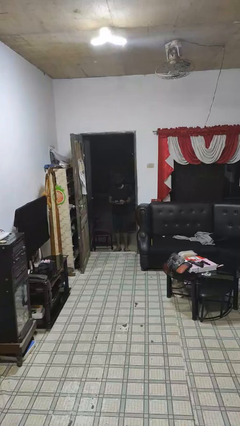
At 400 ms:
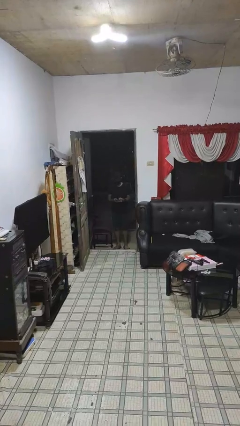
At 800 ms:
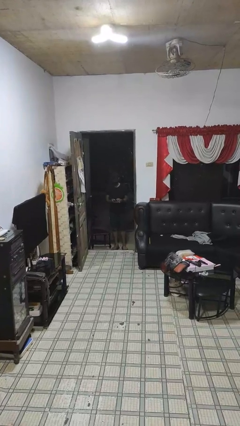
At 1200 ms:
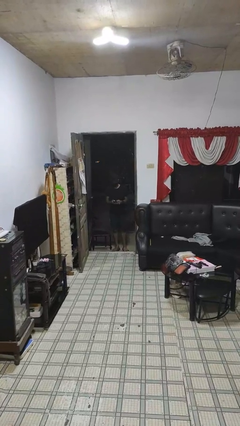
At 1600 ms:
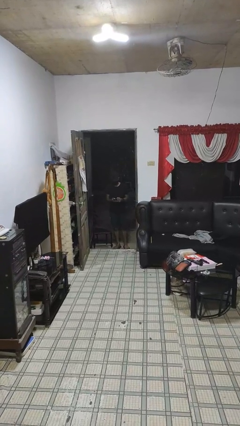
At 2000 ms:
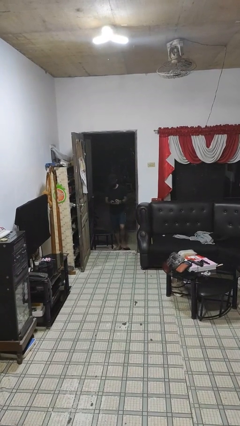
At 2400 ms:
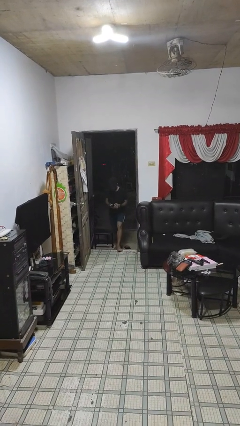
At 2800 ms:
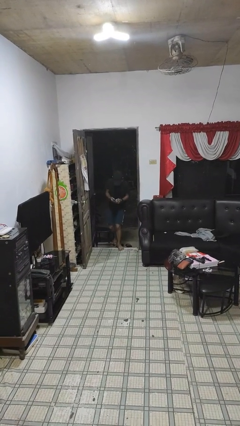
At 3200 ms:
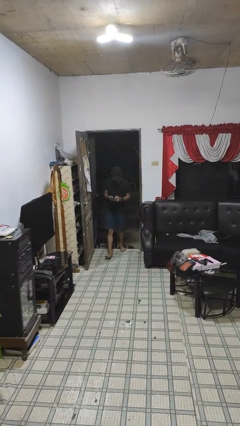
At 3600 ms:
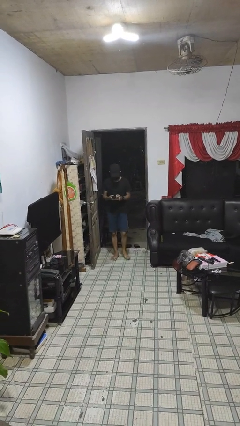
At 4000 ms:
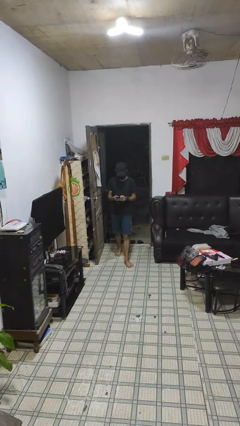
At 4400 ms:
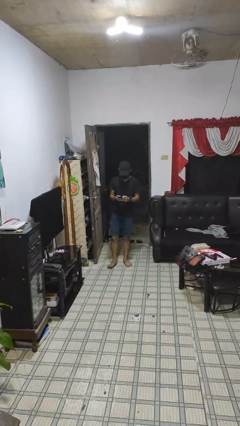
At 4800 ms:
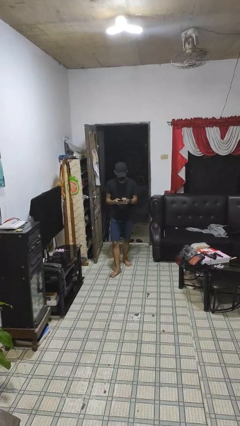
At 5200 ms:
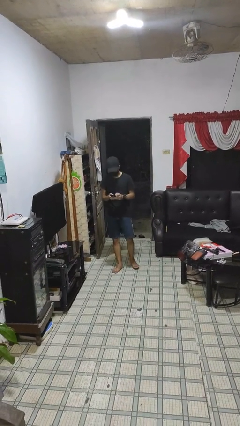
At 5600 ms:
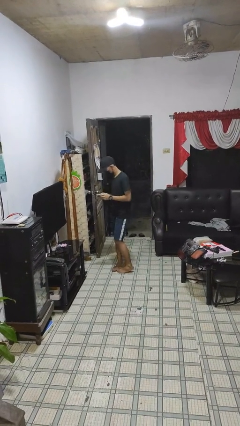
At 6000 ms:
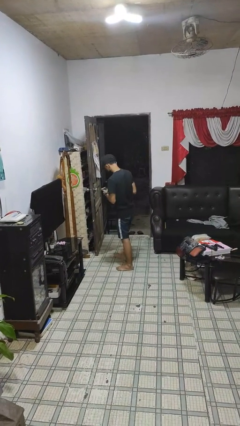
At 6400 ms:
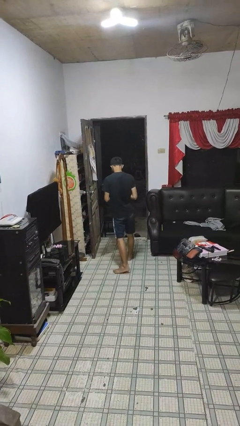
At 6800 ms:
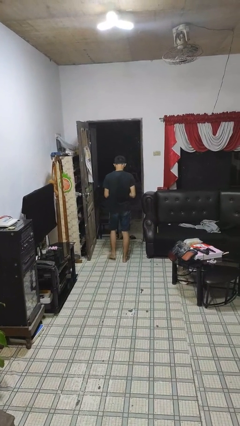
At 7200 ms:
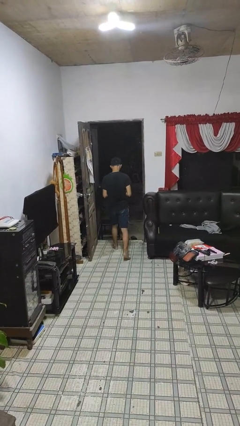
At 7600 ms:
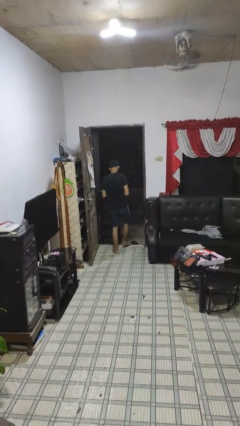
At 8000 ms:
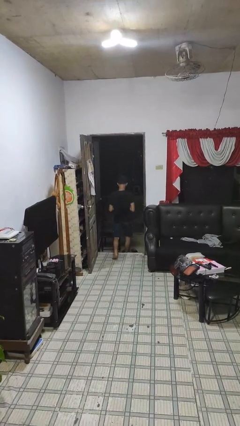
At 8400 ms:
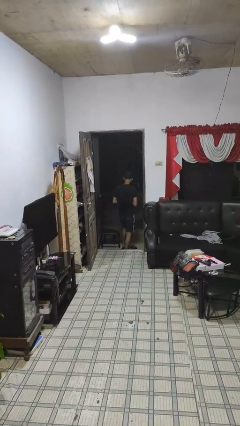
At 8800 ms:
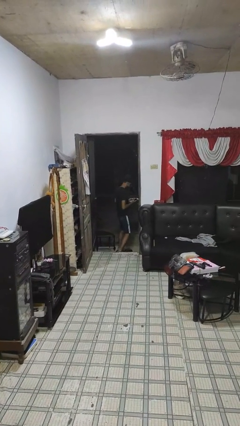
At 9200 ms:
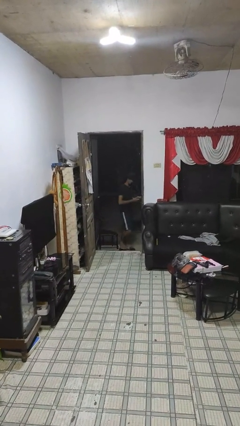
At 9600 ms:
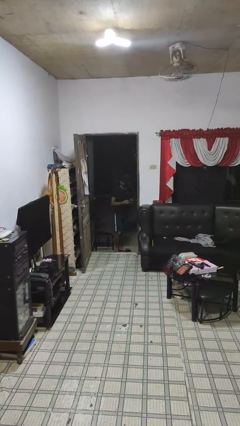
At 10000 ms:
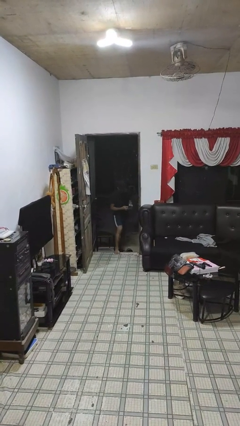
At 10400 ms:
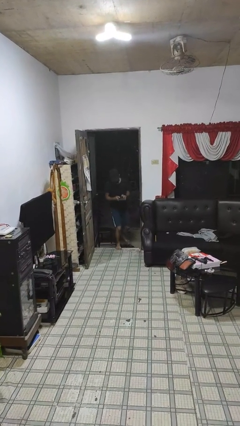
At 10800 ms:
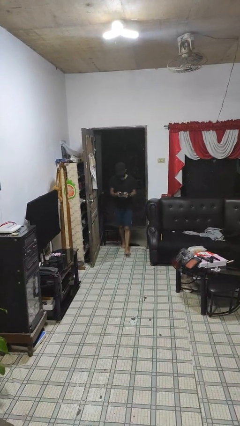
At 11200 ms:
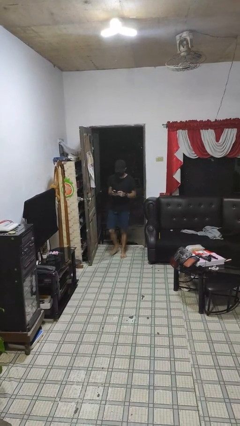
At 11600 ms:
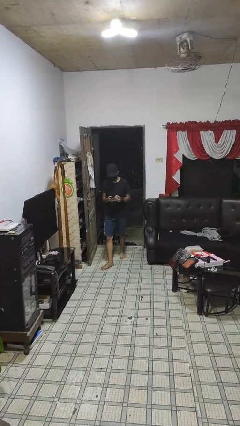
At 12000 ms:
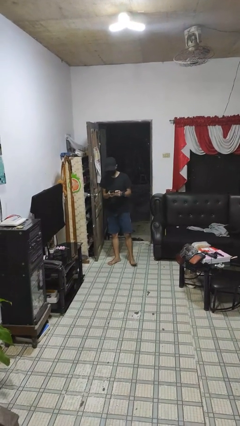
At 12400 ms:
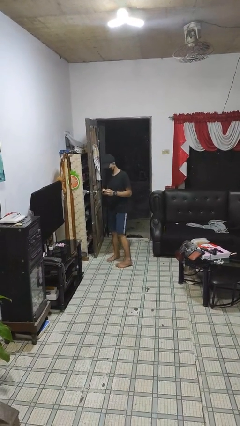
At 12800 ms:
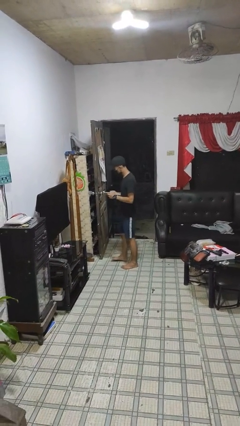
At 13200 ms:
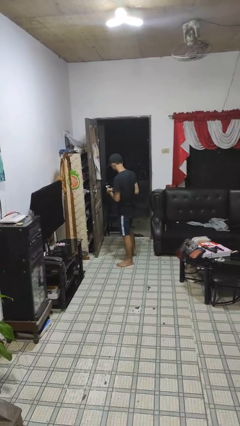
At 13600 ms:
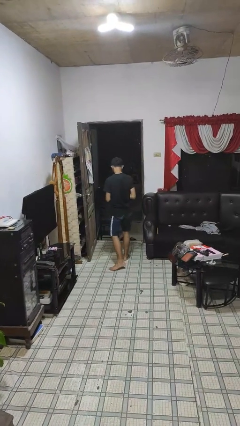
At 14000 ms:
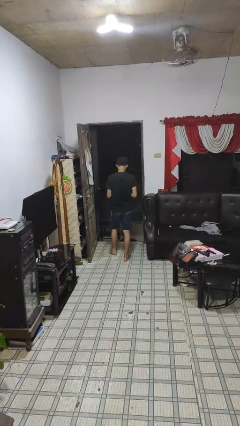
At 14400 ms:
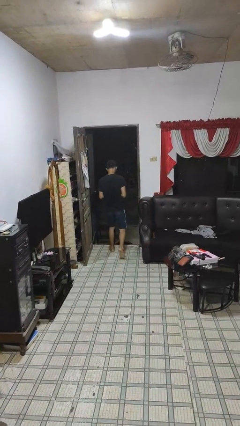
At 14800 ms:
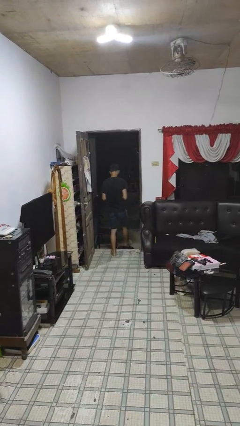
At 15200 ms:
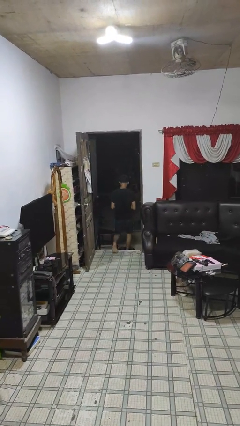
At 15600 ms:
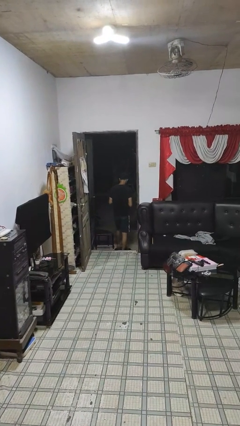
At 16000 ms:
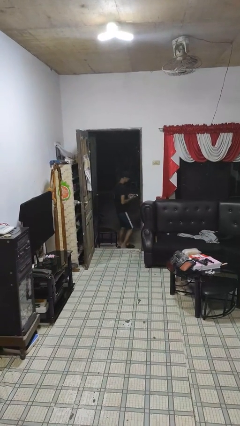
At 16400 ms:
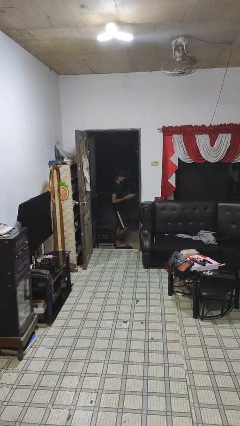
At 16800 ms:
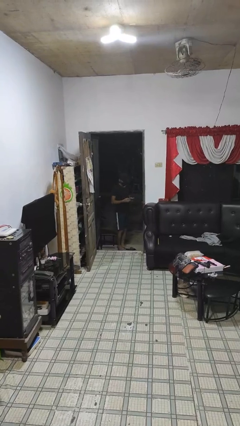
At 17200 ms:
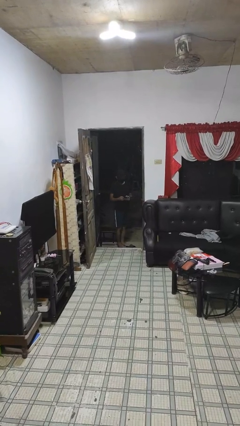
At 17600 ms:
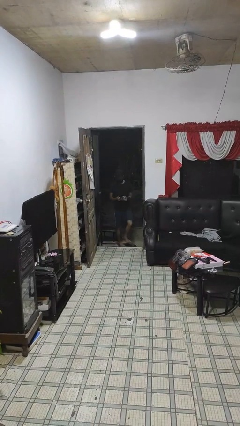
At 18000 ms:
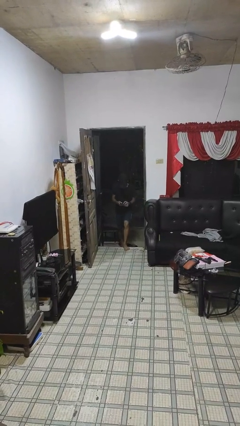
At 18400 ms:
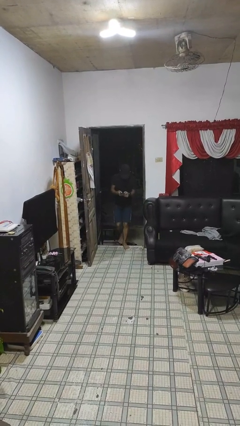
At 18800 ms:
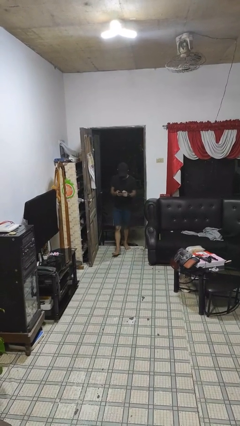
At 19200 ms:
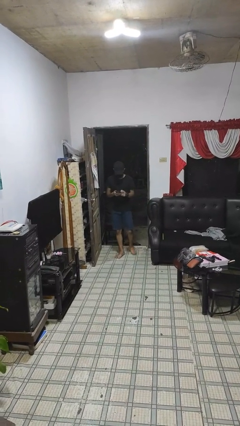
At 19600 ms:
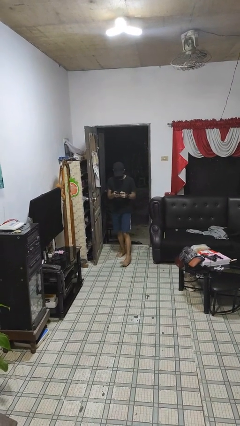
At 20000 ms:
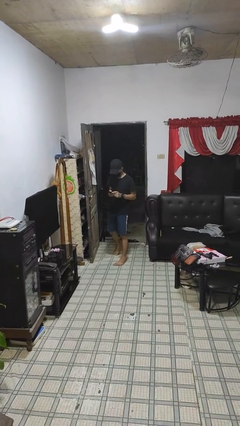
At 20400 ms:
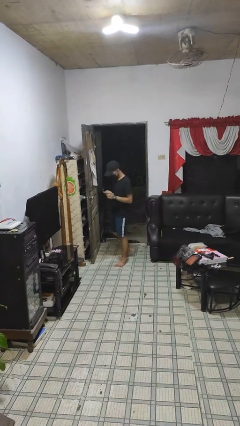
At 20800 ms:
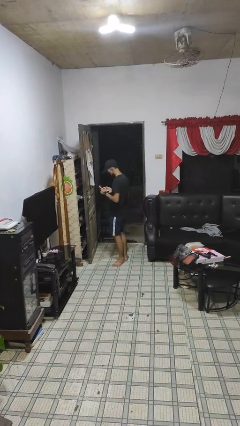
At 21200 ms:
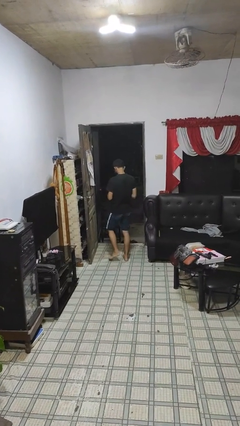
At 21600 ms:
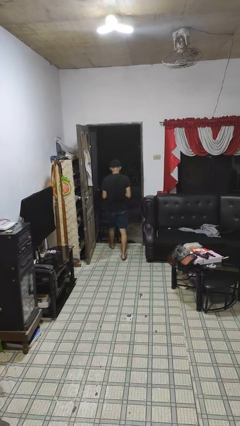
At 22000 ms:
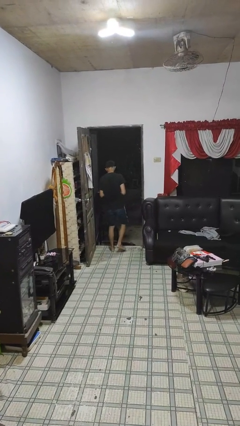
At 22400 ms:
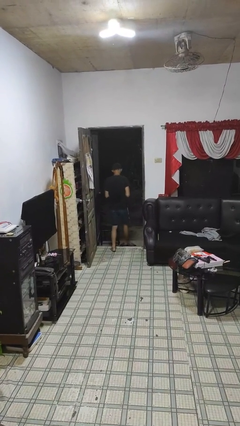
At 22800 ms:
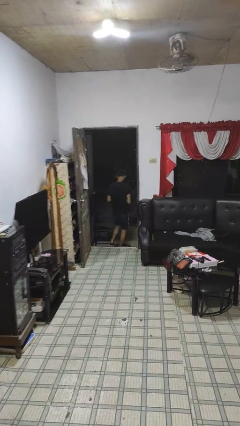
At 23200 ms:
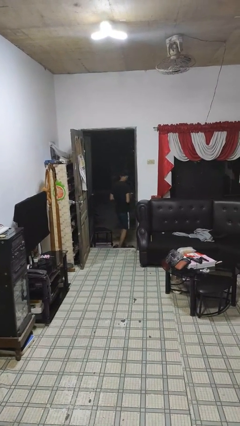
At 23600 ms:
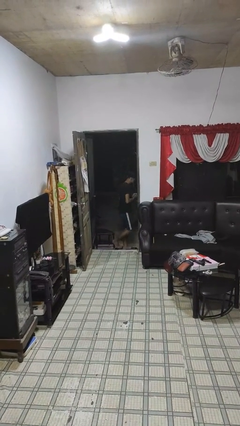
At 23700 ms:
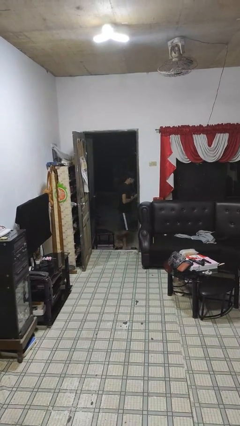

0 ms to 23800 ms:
person texts on phone

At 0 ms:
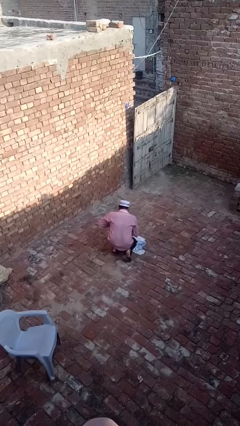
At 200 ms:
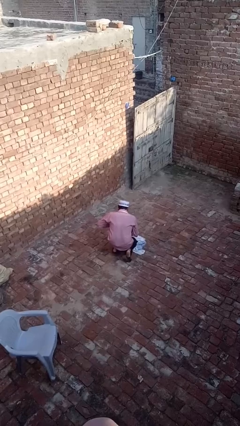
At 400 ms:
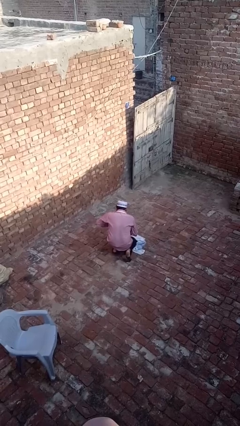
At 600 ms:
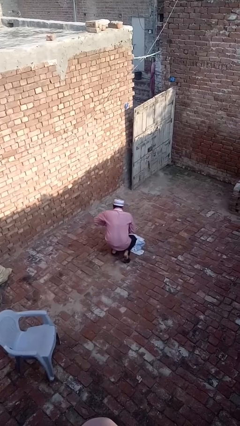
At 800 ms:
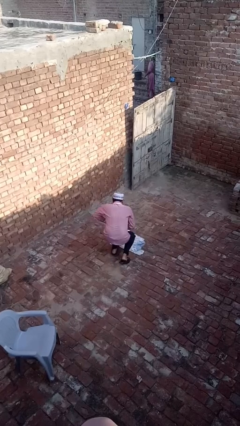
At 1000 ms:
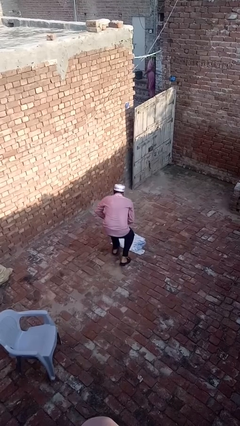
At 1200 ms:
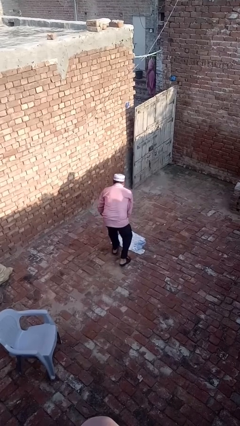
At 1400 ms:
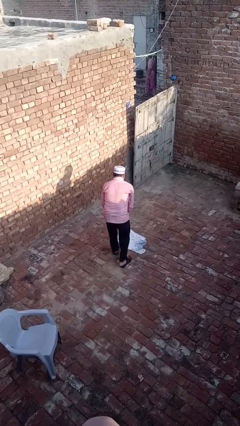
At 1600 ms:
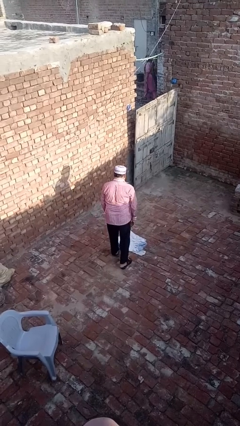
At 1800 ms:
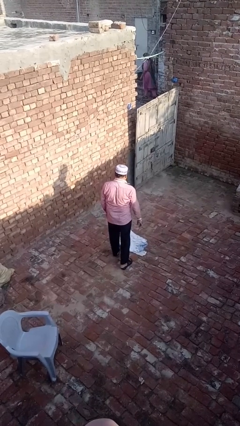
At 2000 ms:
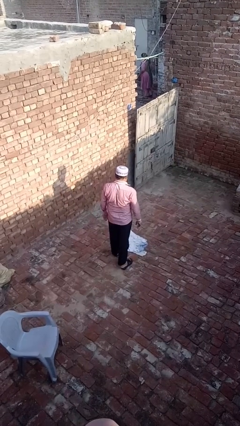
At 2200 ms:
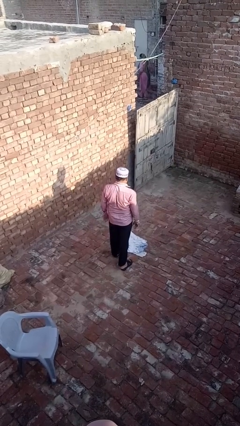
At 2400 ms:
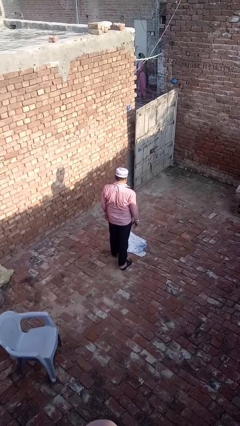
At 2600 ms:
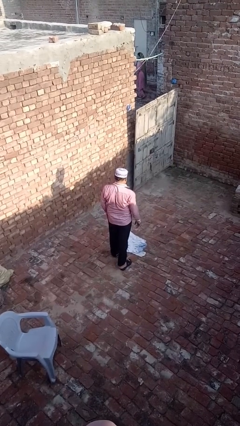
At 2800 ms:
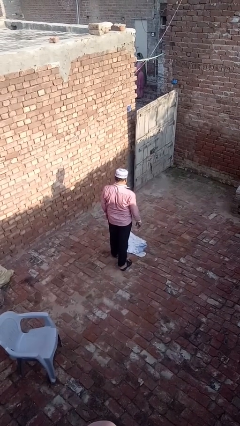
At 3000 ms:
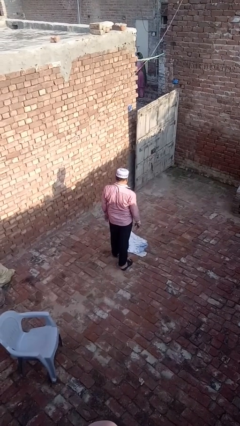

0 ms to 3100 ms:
person stands up from floor

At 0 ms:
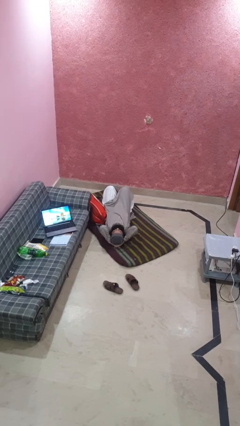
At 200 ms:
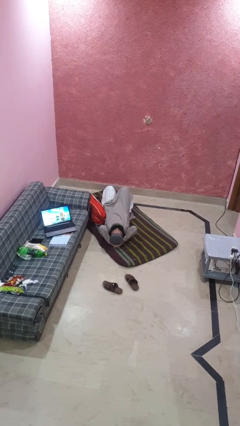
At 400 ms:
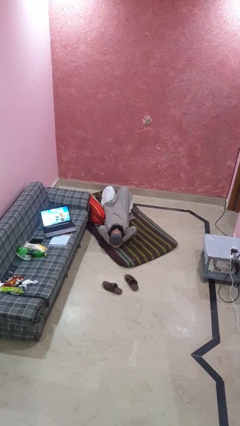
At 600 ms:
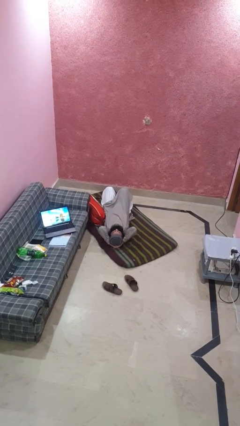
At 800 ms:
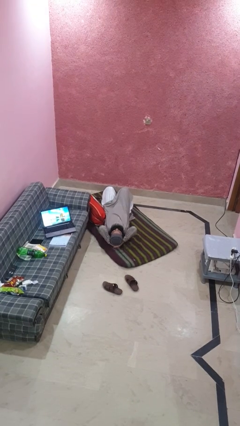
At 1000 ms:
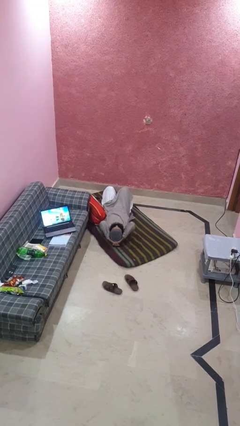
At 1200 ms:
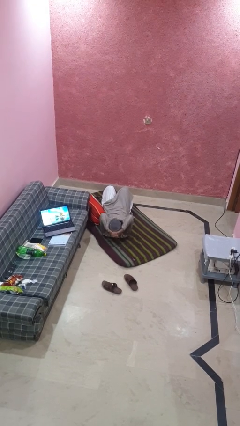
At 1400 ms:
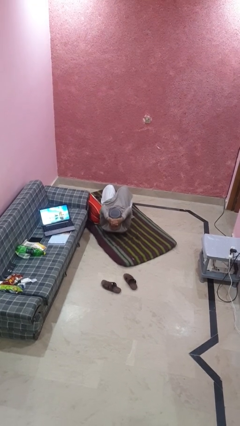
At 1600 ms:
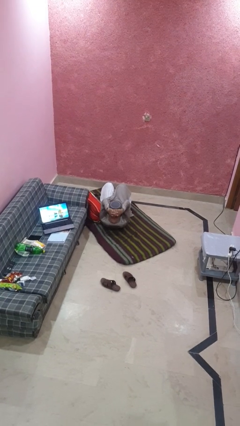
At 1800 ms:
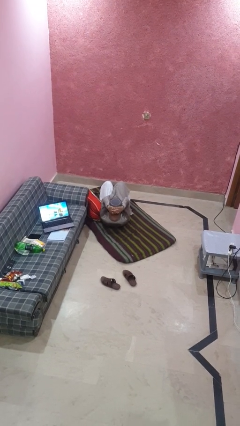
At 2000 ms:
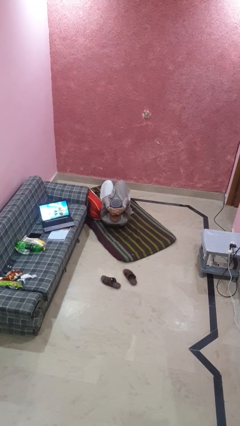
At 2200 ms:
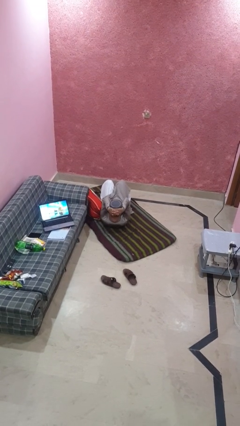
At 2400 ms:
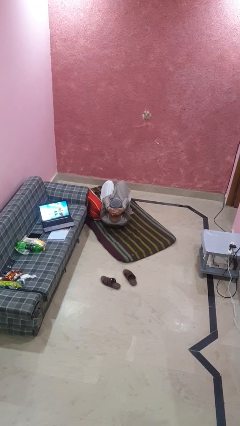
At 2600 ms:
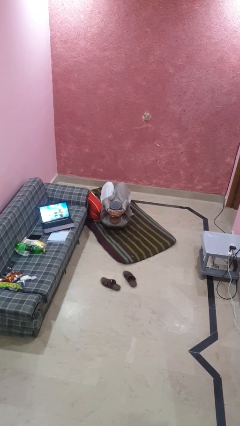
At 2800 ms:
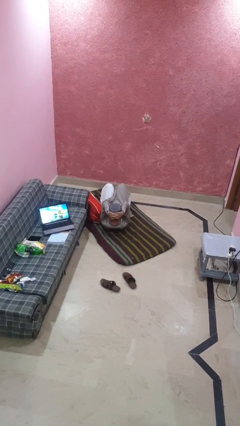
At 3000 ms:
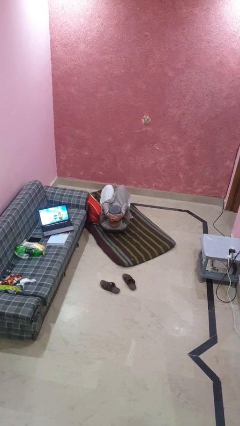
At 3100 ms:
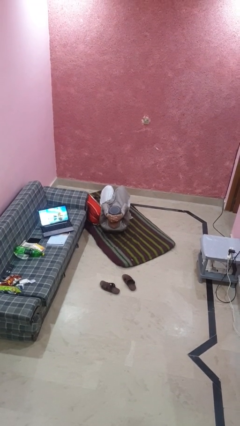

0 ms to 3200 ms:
person exercises with situp
